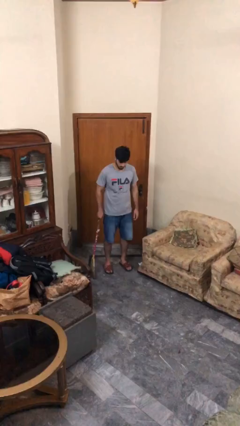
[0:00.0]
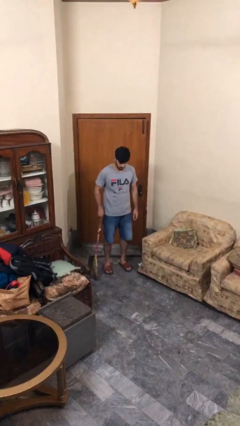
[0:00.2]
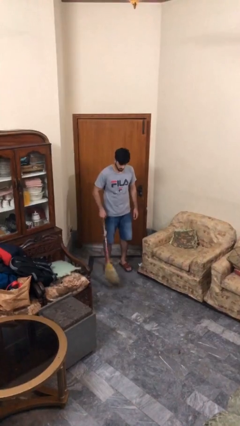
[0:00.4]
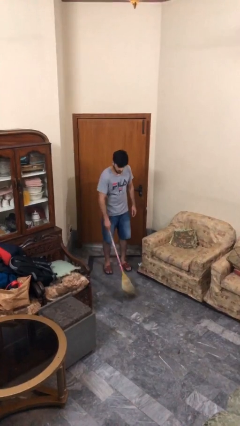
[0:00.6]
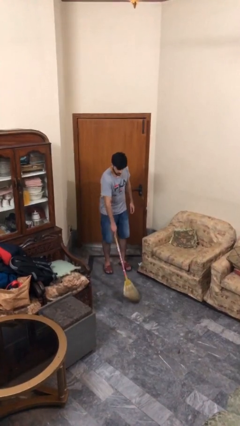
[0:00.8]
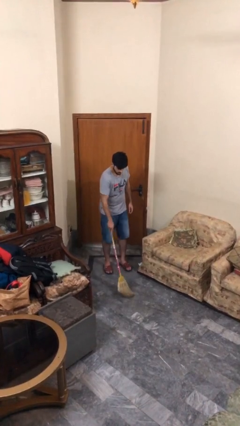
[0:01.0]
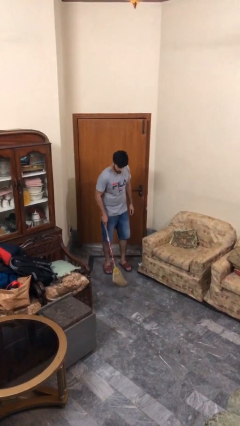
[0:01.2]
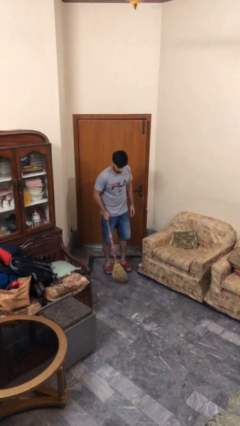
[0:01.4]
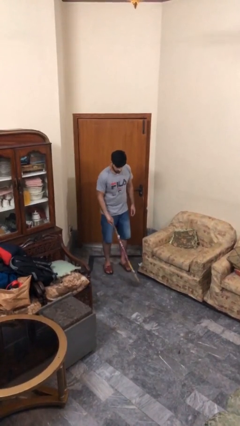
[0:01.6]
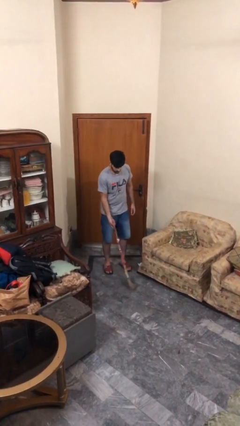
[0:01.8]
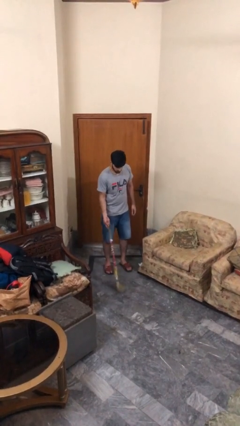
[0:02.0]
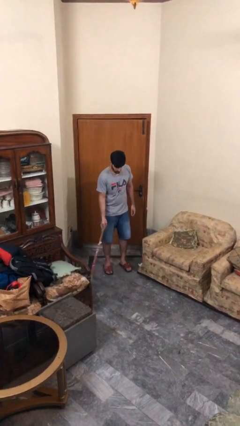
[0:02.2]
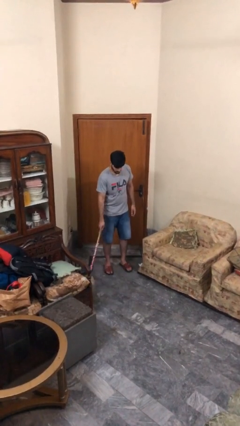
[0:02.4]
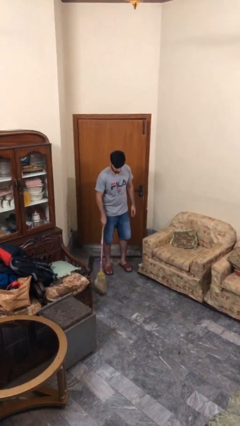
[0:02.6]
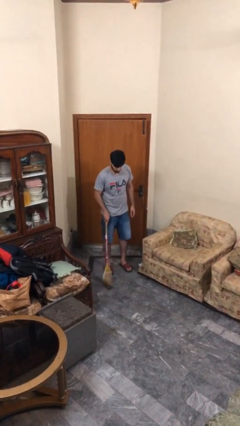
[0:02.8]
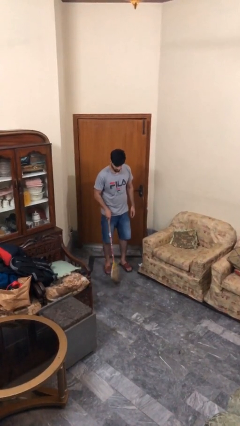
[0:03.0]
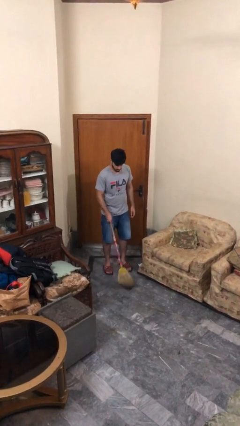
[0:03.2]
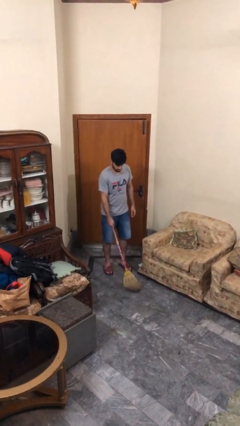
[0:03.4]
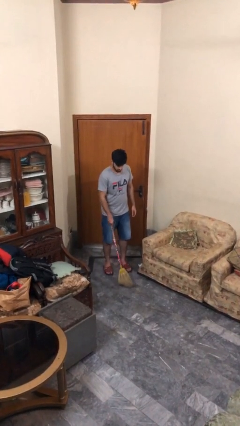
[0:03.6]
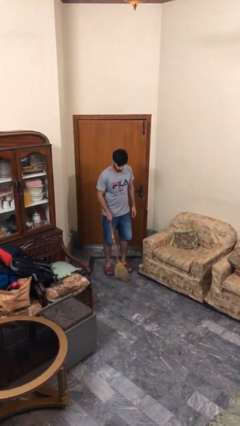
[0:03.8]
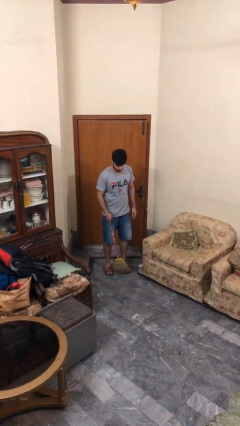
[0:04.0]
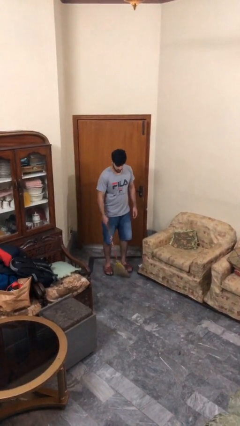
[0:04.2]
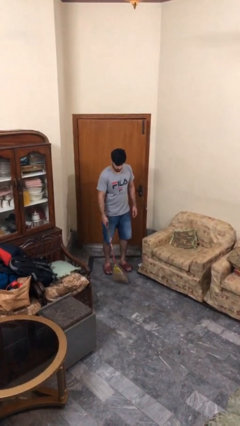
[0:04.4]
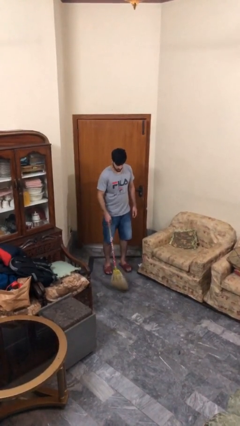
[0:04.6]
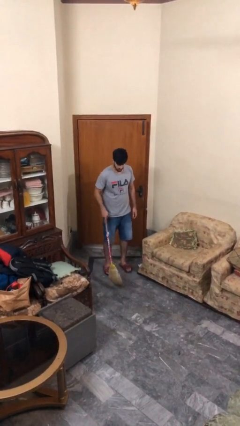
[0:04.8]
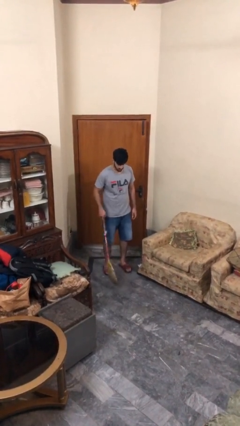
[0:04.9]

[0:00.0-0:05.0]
person sweeps floor

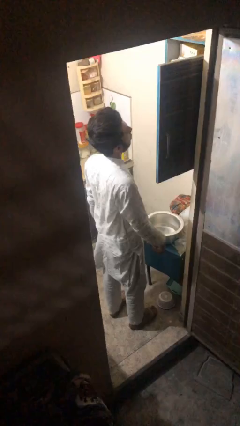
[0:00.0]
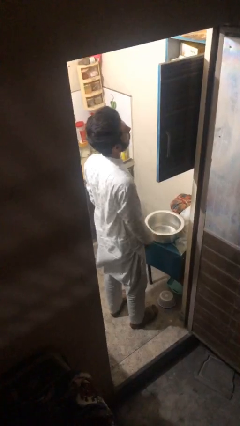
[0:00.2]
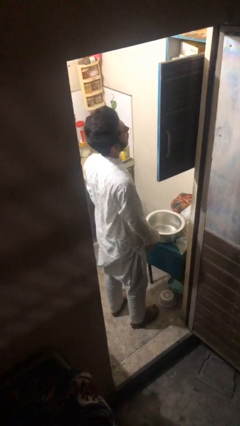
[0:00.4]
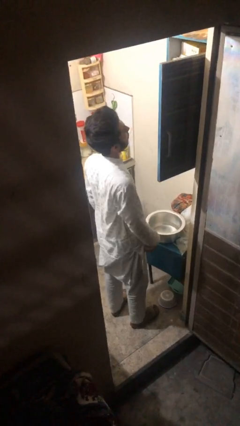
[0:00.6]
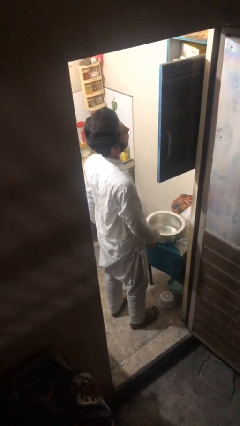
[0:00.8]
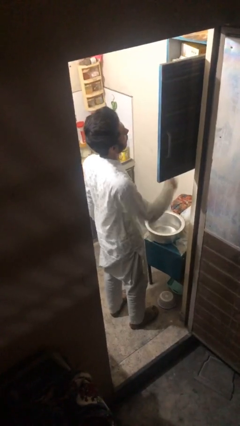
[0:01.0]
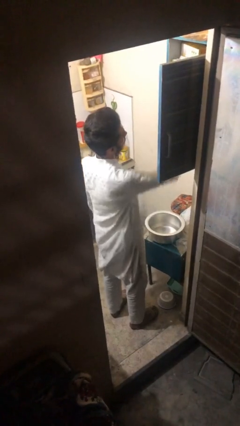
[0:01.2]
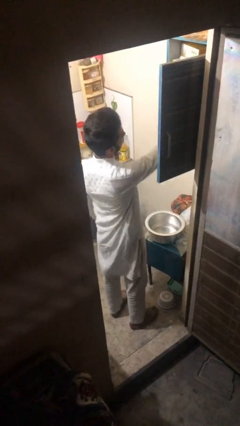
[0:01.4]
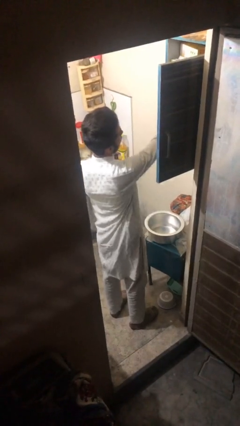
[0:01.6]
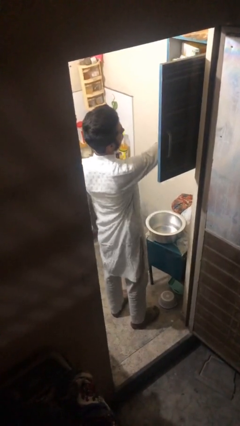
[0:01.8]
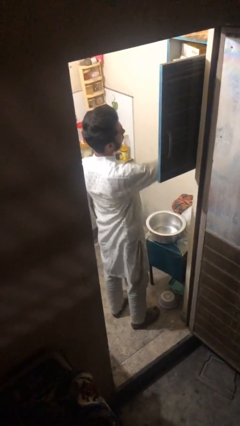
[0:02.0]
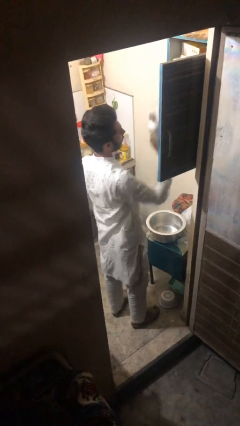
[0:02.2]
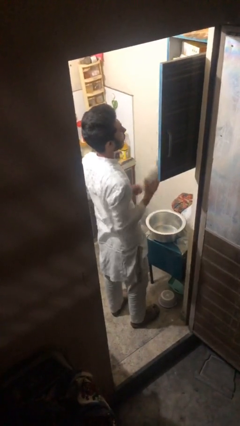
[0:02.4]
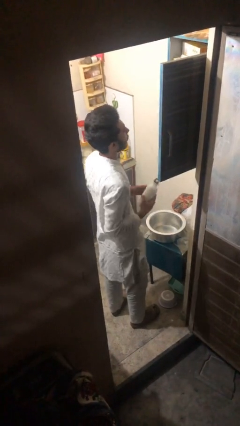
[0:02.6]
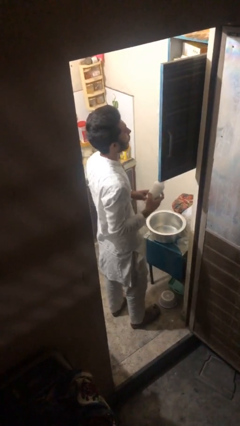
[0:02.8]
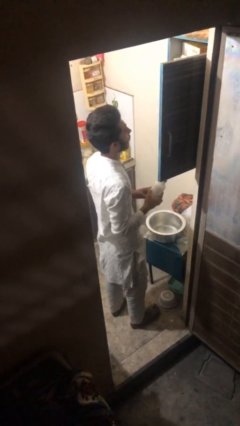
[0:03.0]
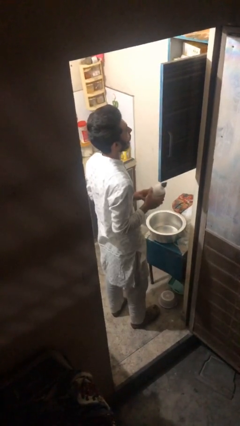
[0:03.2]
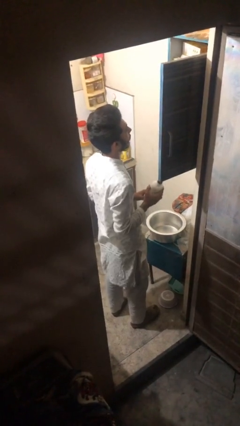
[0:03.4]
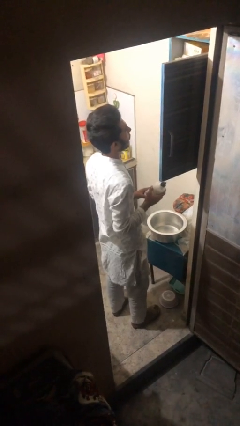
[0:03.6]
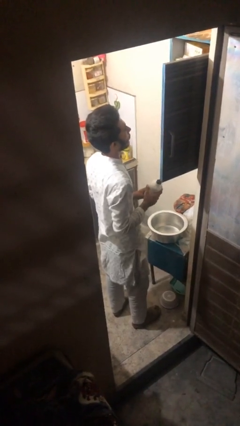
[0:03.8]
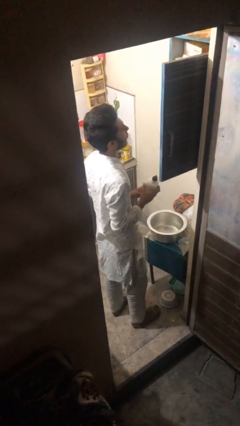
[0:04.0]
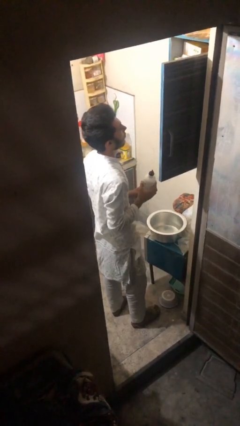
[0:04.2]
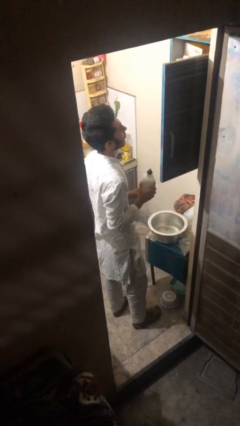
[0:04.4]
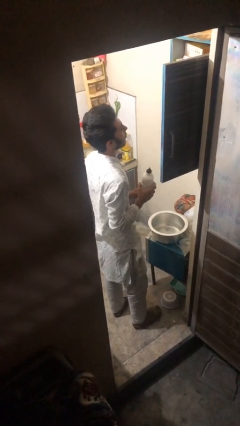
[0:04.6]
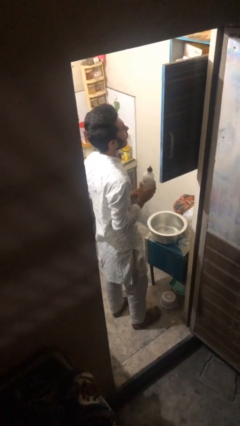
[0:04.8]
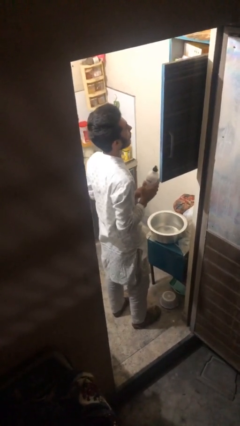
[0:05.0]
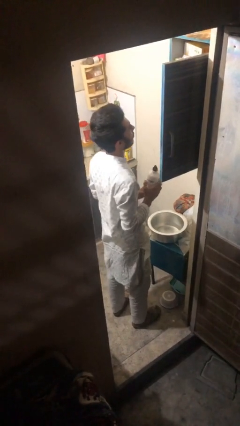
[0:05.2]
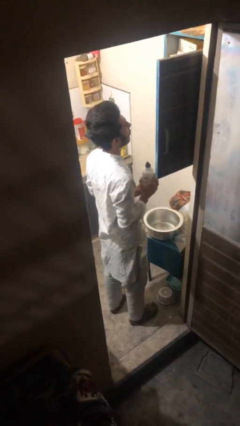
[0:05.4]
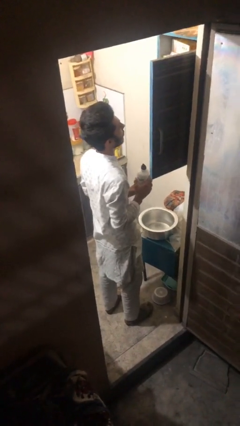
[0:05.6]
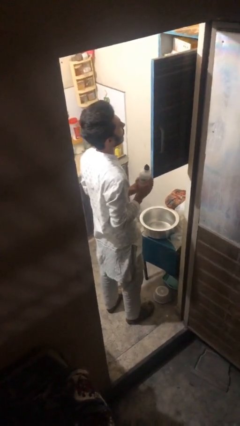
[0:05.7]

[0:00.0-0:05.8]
person takes object from cabinet

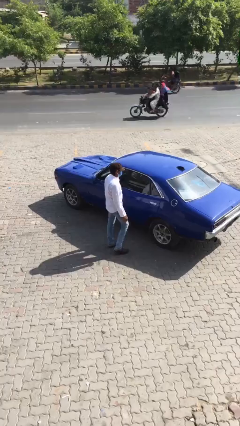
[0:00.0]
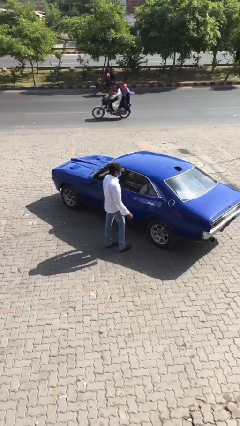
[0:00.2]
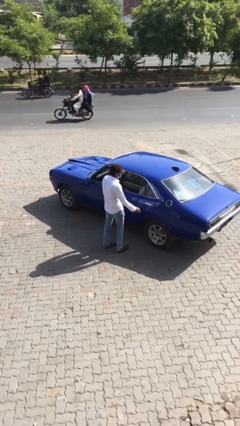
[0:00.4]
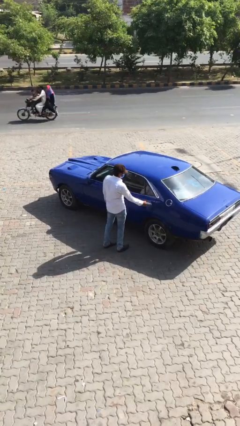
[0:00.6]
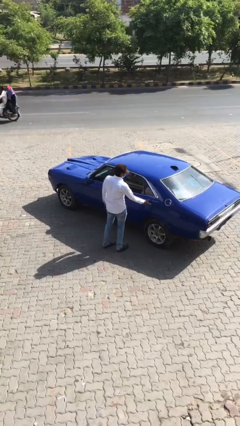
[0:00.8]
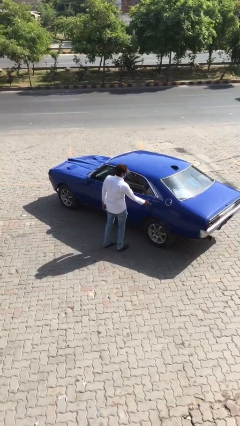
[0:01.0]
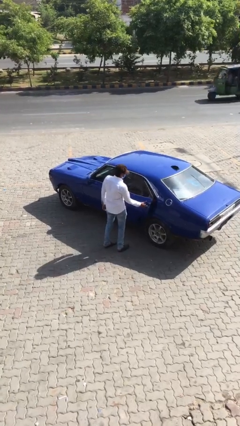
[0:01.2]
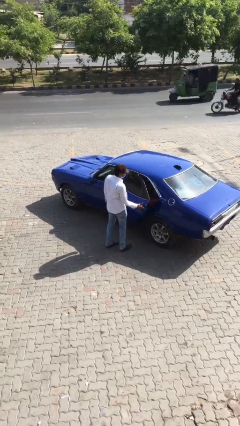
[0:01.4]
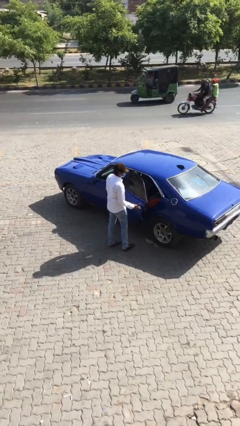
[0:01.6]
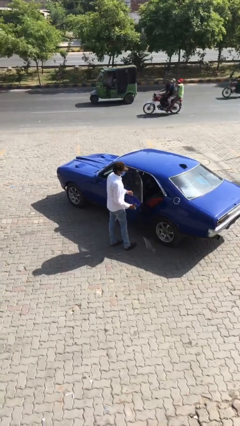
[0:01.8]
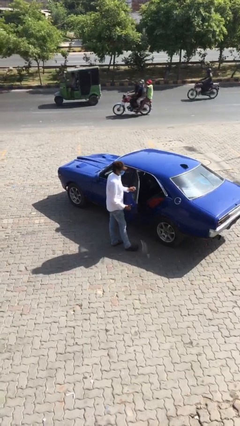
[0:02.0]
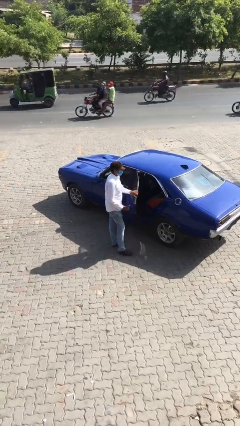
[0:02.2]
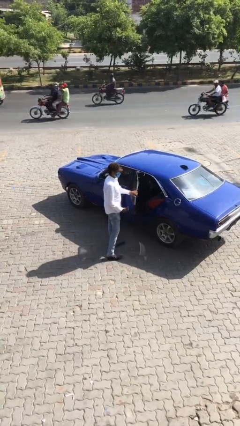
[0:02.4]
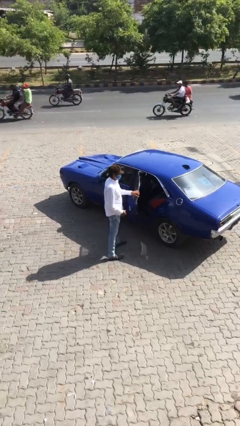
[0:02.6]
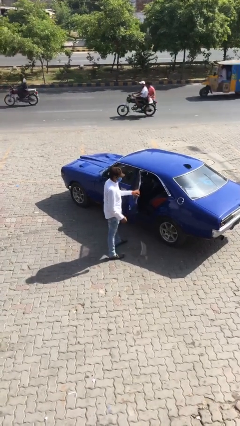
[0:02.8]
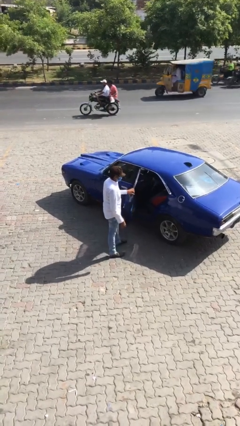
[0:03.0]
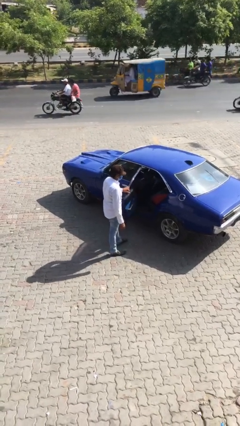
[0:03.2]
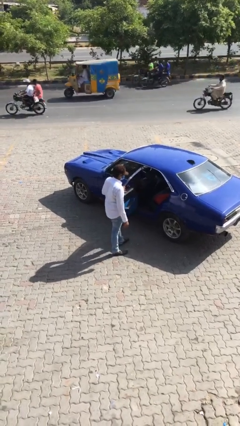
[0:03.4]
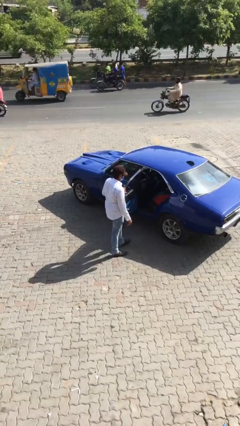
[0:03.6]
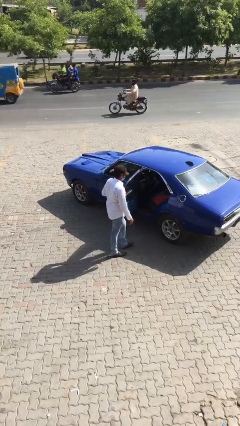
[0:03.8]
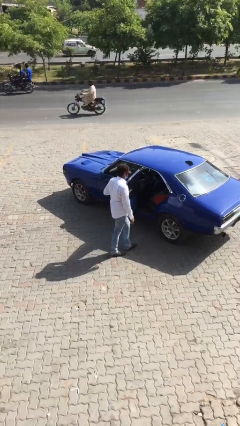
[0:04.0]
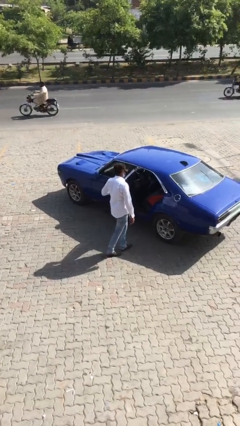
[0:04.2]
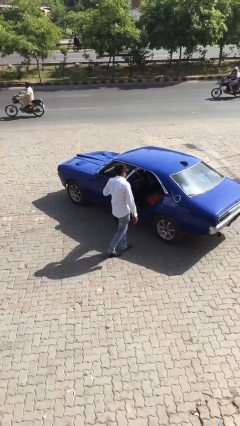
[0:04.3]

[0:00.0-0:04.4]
person opens car door

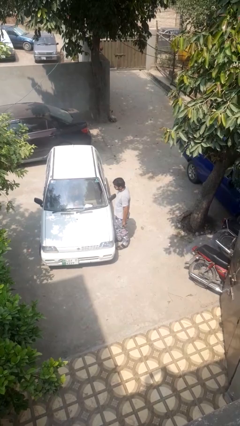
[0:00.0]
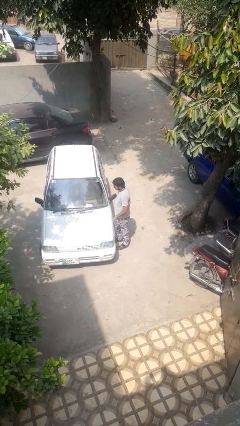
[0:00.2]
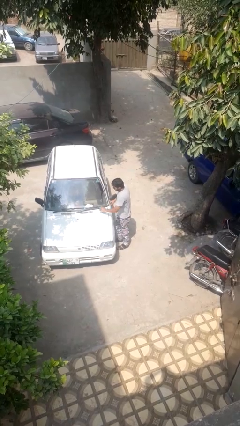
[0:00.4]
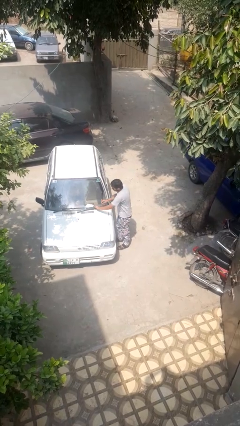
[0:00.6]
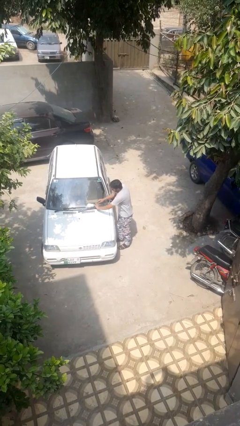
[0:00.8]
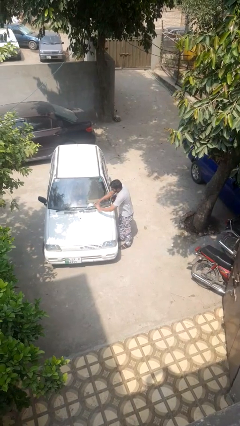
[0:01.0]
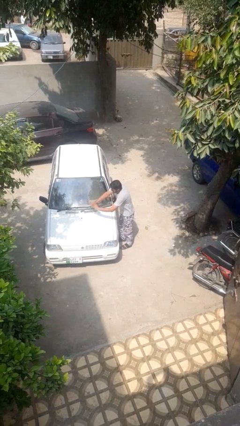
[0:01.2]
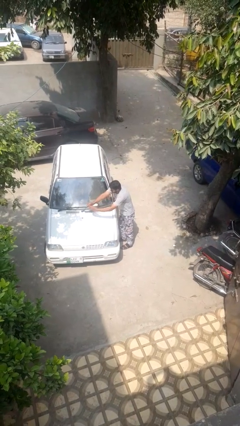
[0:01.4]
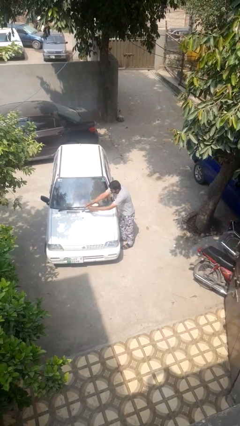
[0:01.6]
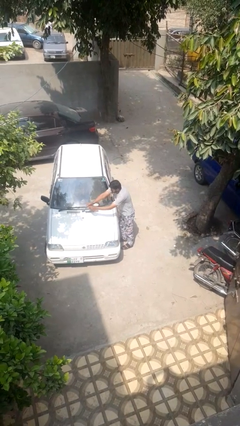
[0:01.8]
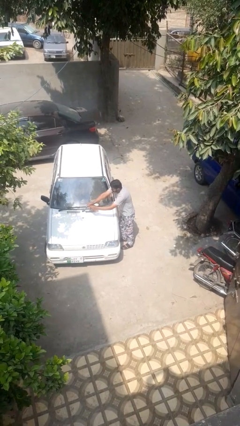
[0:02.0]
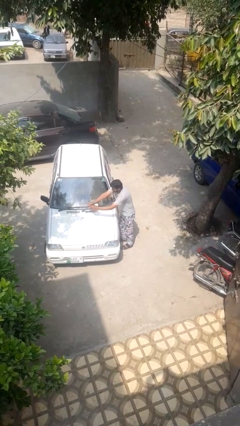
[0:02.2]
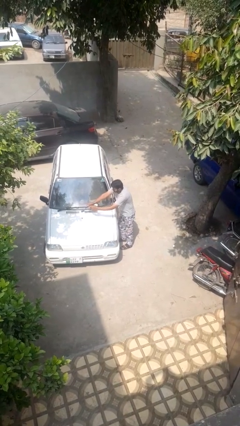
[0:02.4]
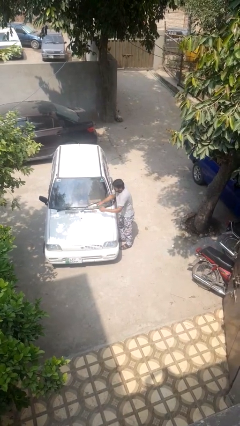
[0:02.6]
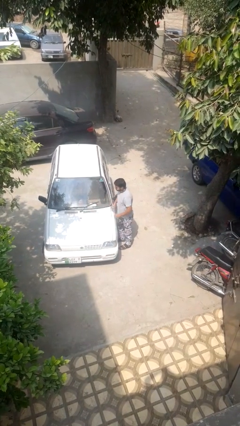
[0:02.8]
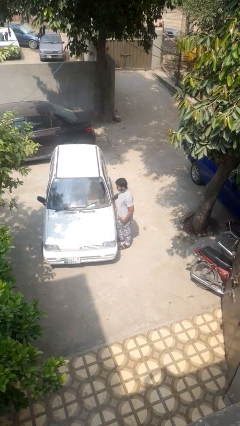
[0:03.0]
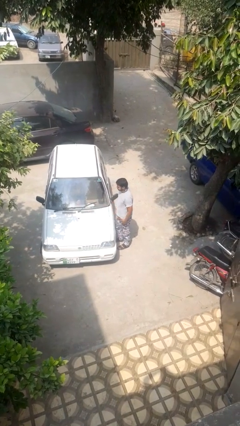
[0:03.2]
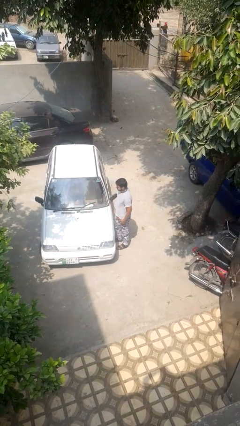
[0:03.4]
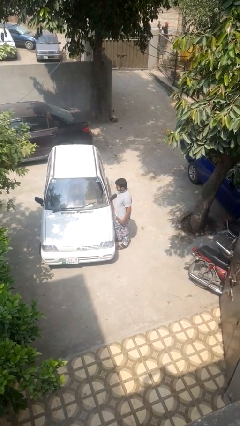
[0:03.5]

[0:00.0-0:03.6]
person flips up car wipers
